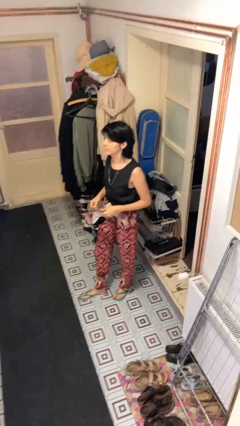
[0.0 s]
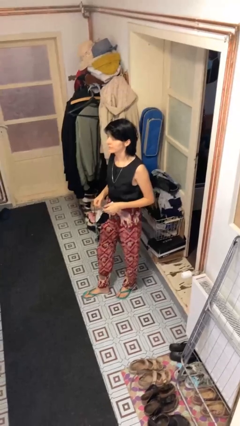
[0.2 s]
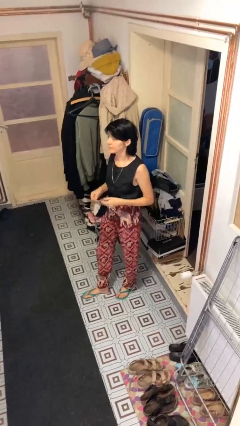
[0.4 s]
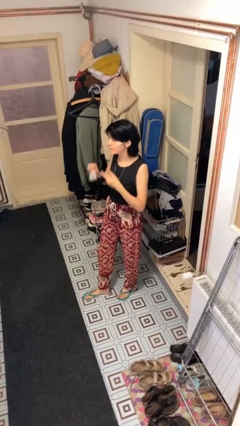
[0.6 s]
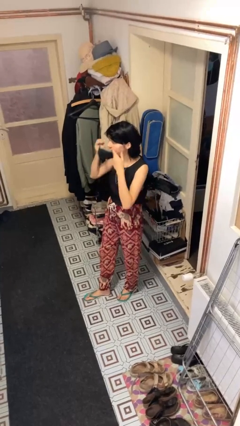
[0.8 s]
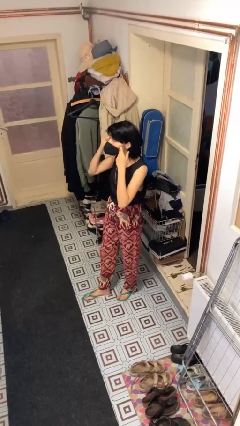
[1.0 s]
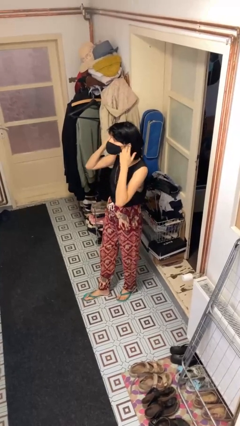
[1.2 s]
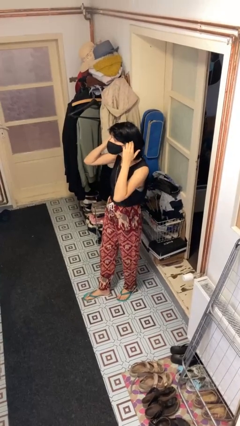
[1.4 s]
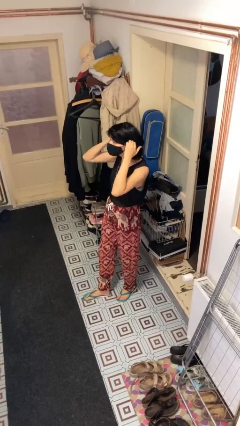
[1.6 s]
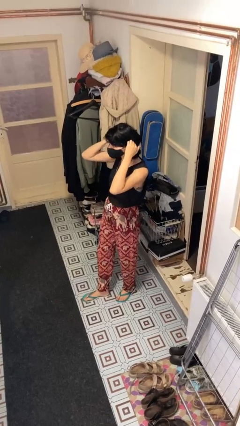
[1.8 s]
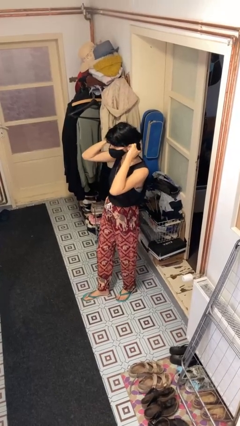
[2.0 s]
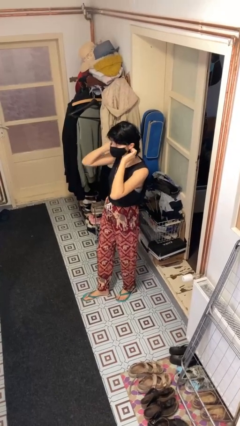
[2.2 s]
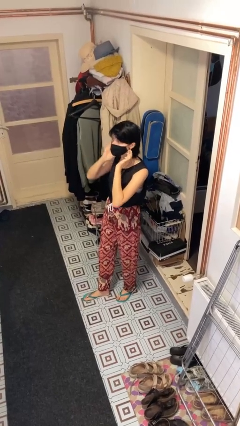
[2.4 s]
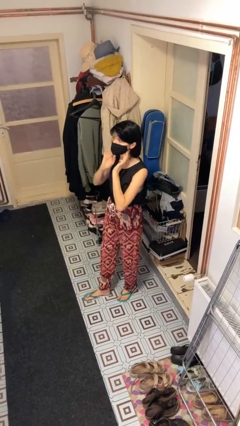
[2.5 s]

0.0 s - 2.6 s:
person puts on facemask

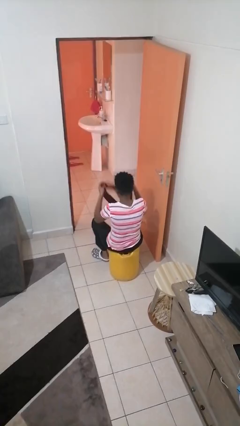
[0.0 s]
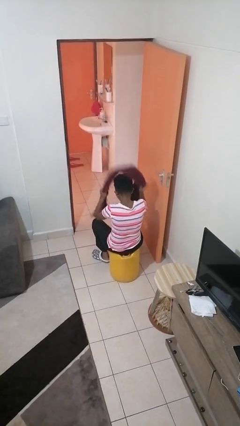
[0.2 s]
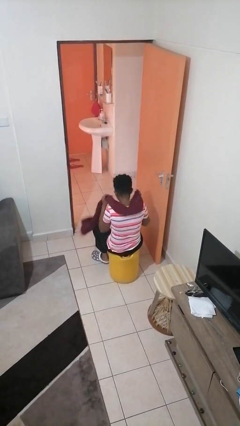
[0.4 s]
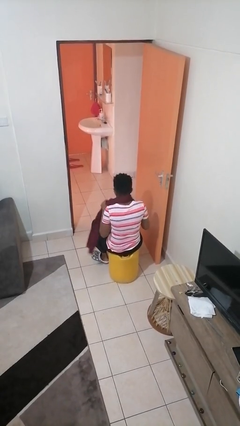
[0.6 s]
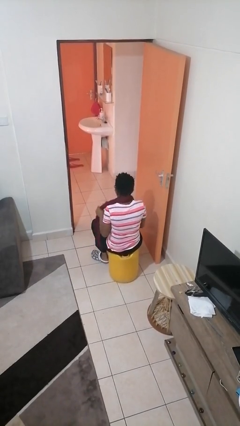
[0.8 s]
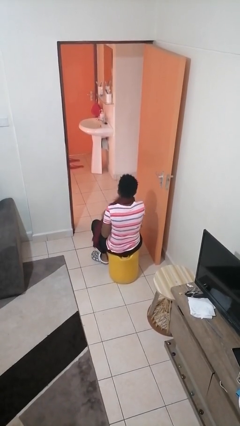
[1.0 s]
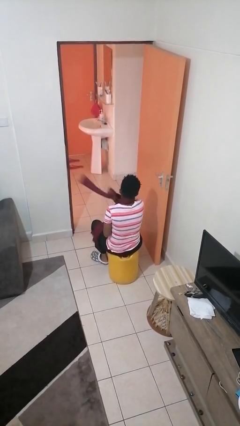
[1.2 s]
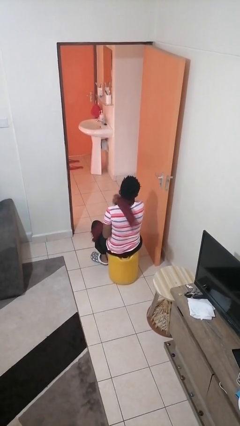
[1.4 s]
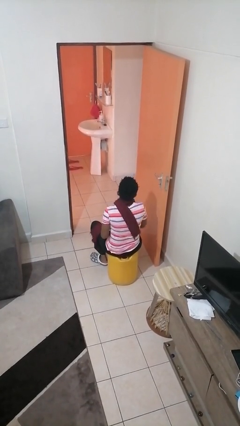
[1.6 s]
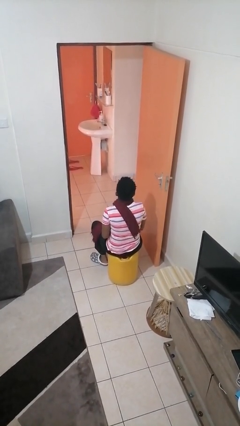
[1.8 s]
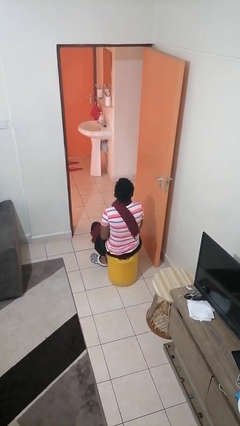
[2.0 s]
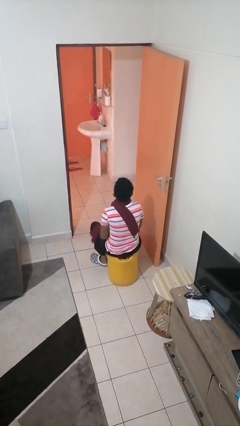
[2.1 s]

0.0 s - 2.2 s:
person puts on scarf

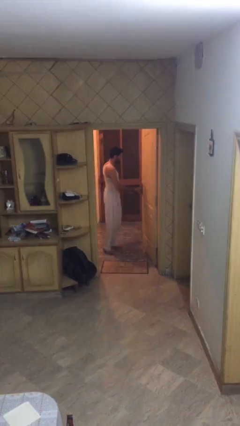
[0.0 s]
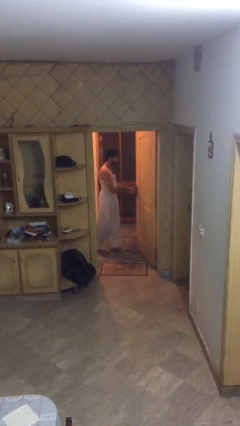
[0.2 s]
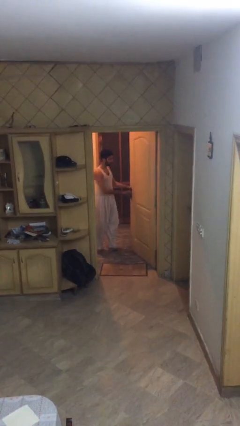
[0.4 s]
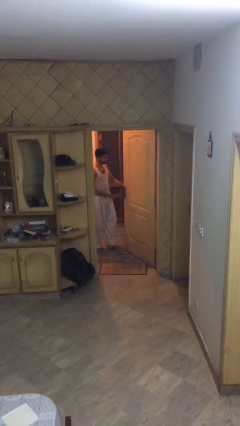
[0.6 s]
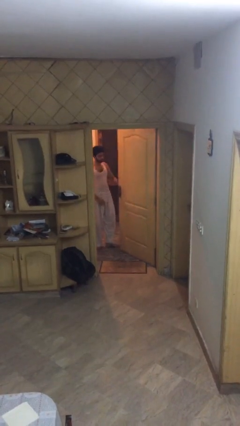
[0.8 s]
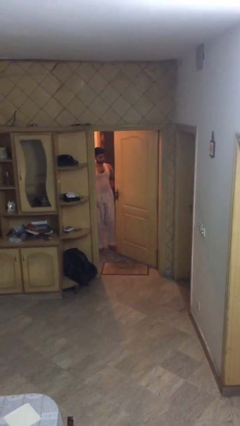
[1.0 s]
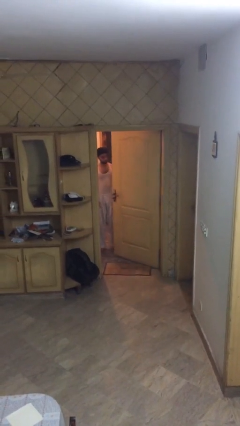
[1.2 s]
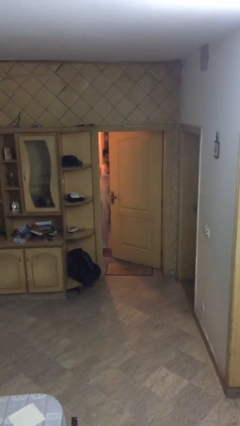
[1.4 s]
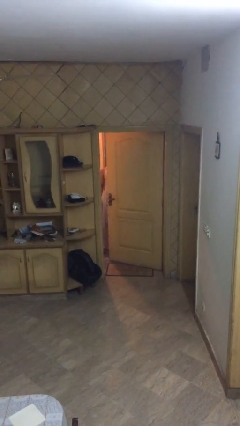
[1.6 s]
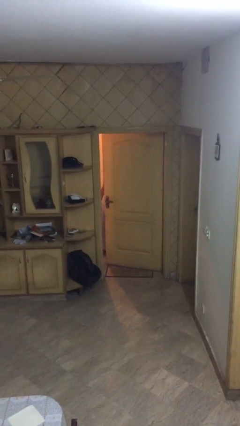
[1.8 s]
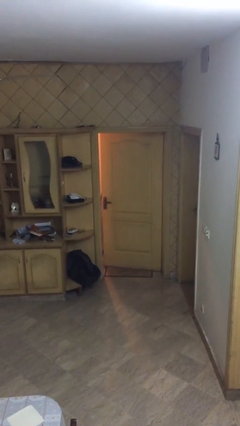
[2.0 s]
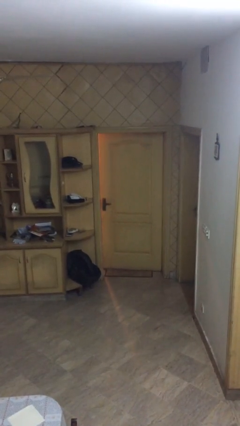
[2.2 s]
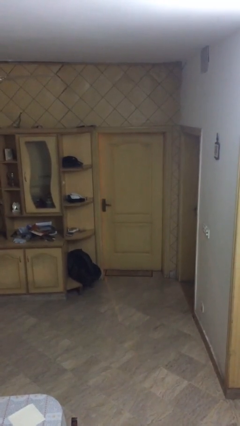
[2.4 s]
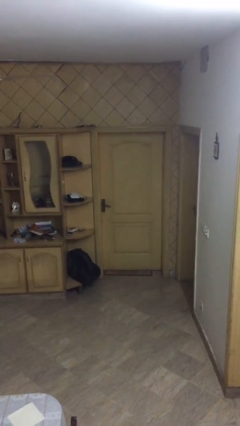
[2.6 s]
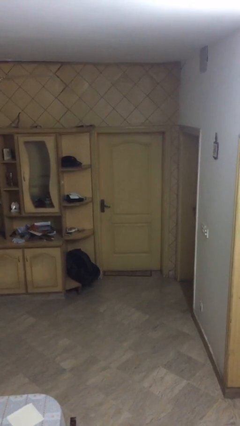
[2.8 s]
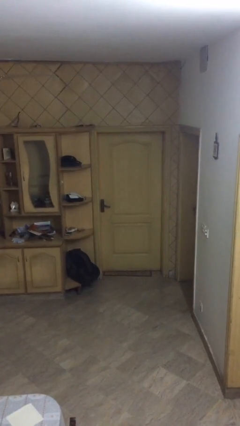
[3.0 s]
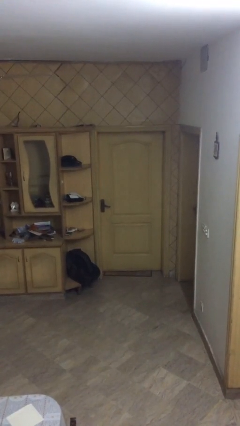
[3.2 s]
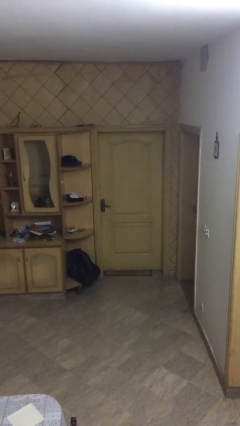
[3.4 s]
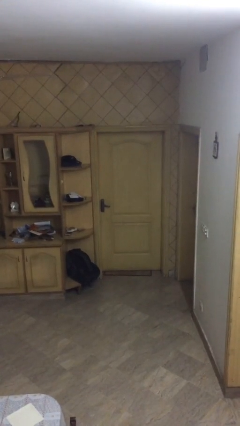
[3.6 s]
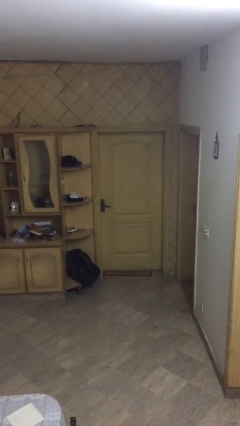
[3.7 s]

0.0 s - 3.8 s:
person closes facility door

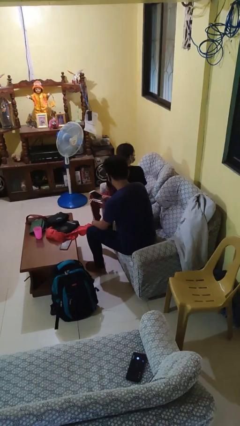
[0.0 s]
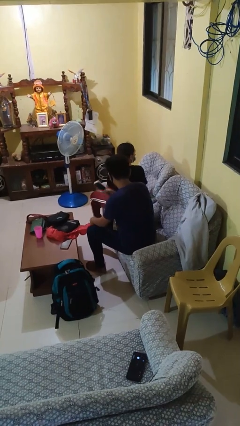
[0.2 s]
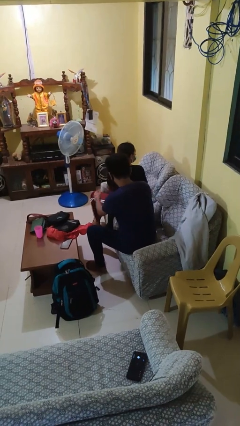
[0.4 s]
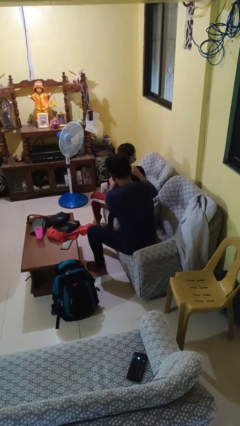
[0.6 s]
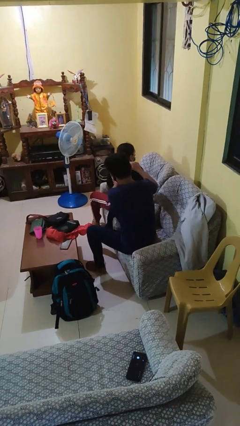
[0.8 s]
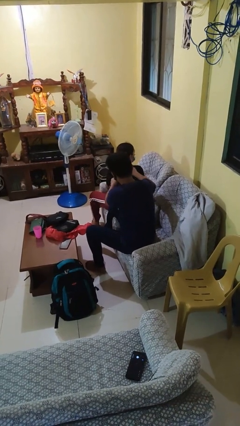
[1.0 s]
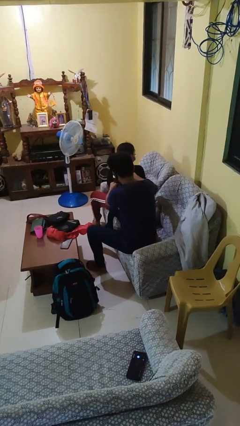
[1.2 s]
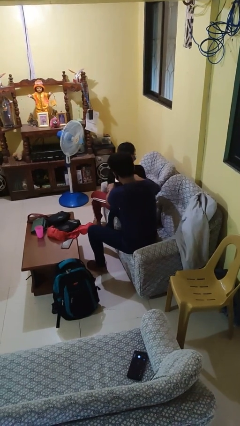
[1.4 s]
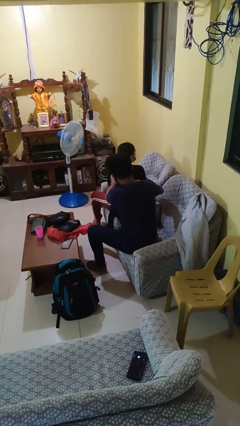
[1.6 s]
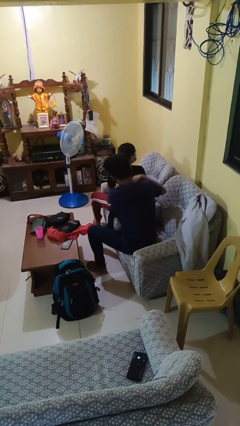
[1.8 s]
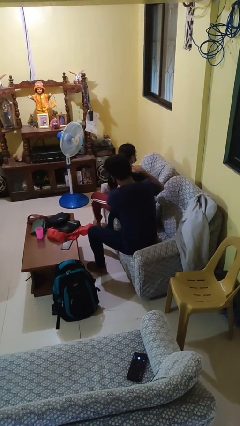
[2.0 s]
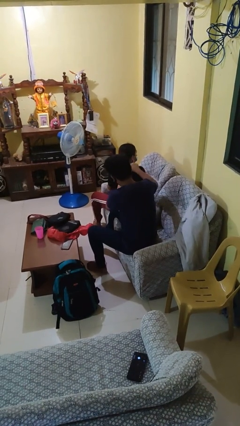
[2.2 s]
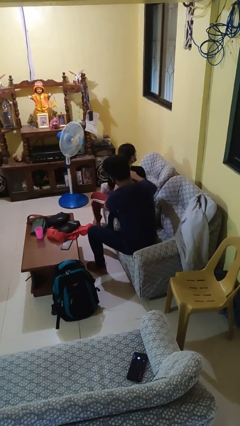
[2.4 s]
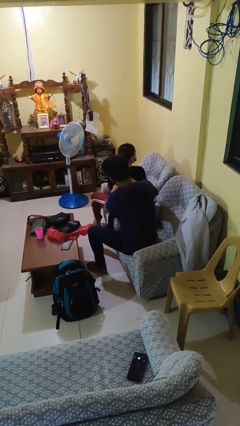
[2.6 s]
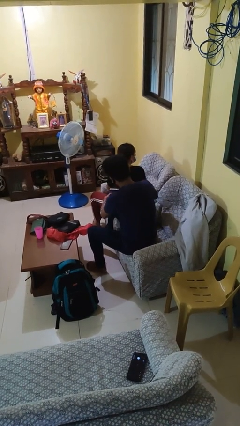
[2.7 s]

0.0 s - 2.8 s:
person brushes hair of person

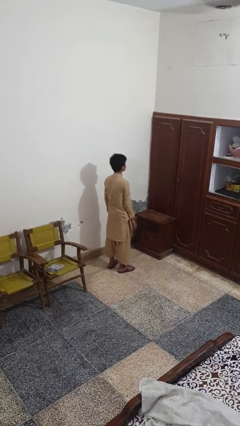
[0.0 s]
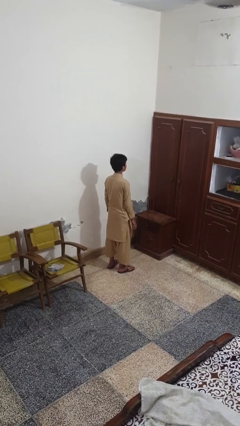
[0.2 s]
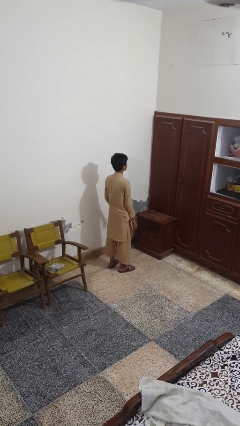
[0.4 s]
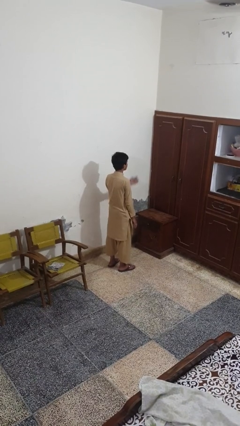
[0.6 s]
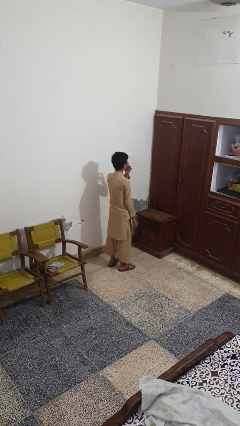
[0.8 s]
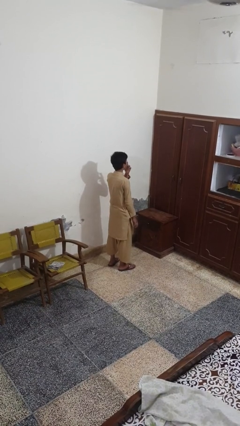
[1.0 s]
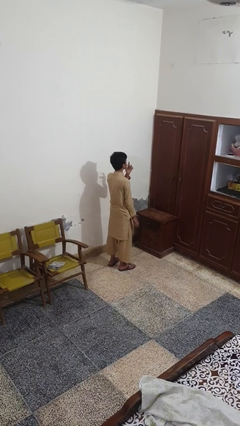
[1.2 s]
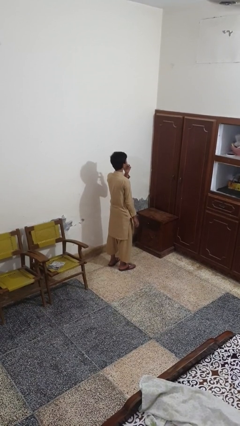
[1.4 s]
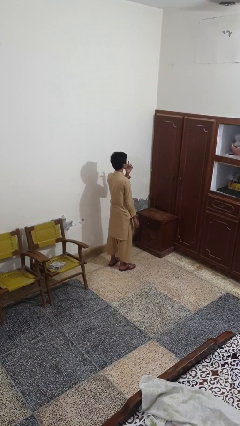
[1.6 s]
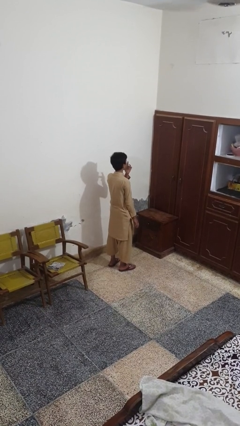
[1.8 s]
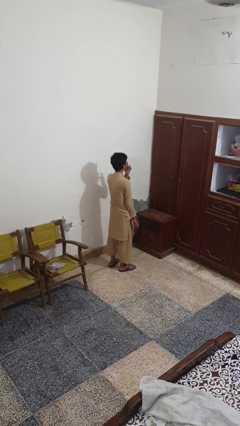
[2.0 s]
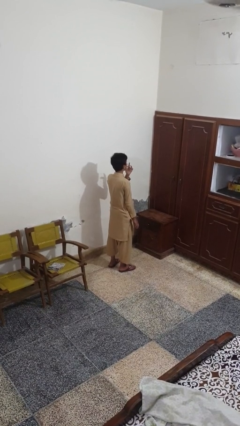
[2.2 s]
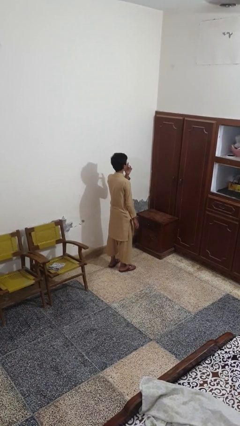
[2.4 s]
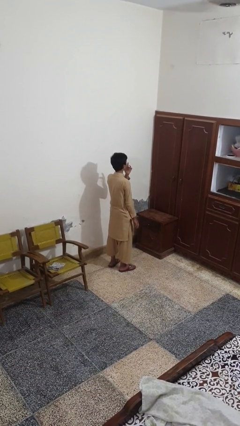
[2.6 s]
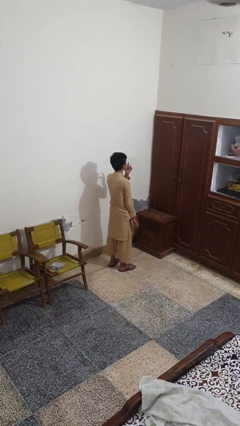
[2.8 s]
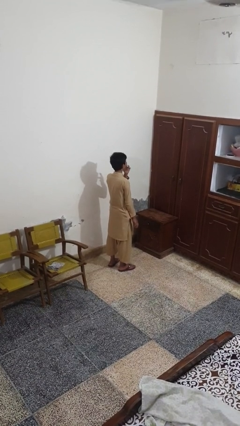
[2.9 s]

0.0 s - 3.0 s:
person licks fingers

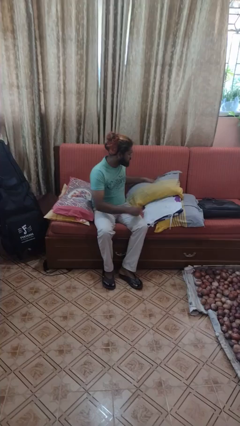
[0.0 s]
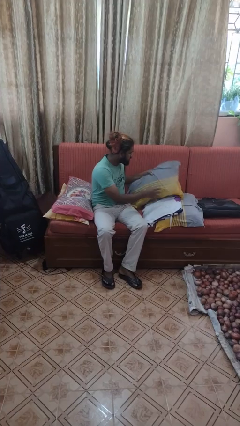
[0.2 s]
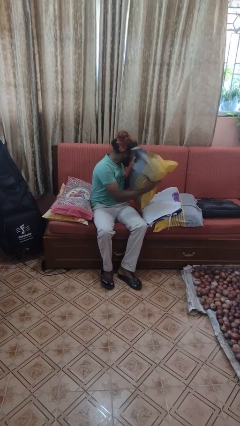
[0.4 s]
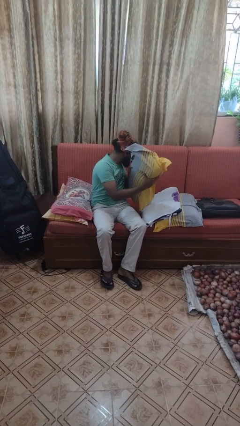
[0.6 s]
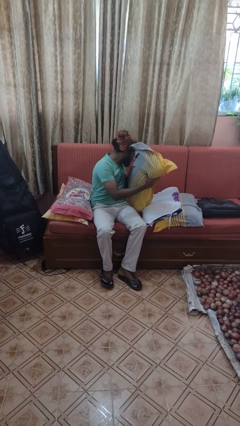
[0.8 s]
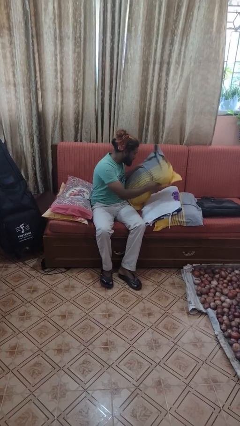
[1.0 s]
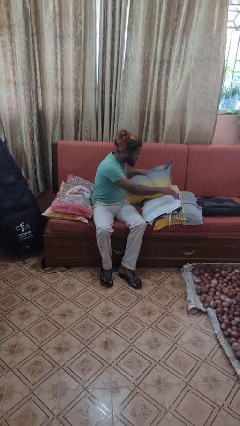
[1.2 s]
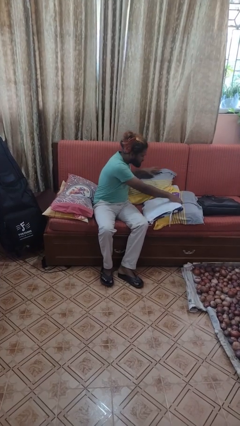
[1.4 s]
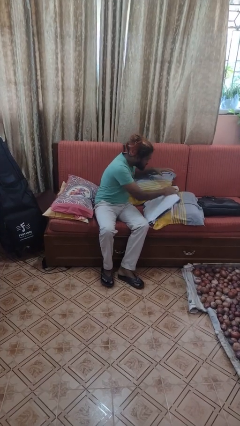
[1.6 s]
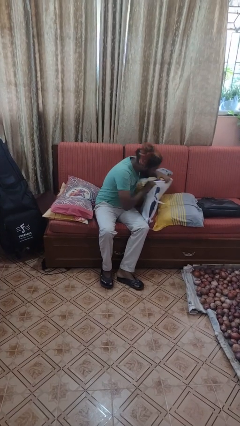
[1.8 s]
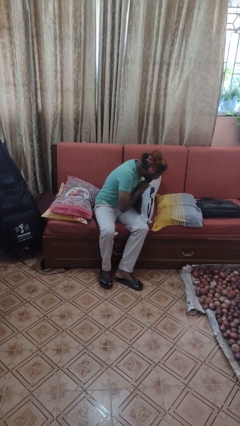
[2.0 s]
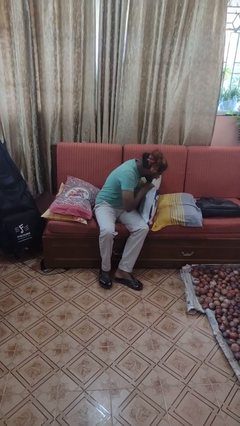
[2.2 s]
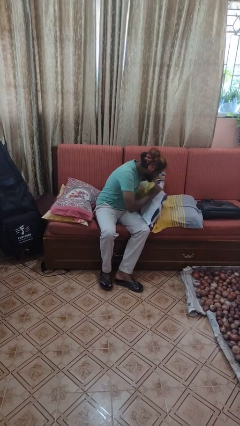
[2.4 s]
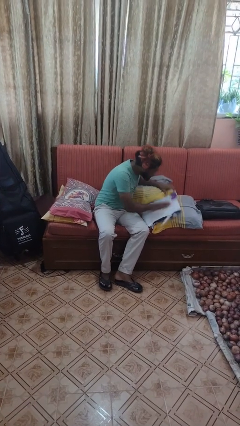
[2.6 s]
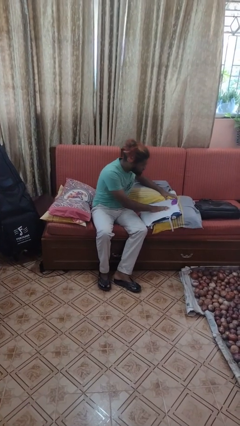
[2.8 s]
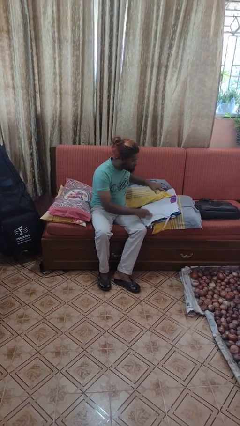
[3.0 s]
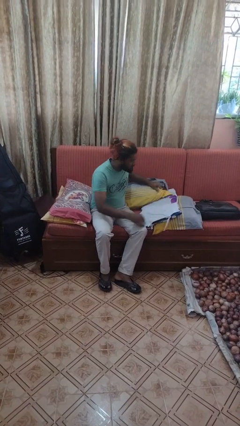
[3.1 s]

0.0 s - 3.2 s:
person searches in couch
